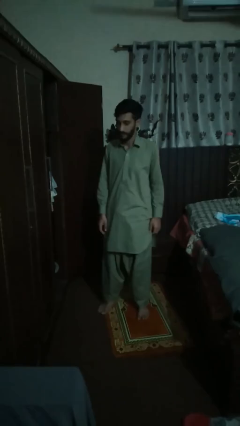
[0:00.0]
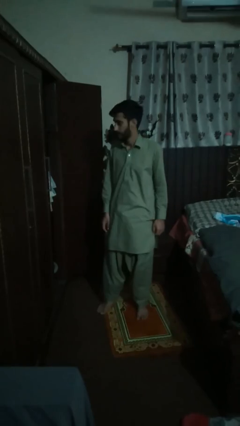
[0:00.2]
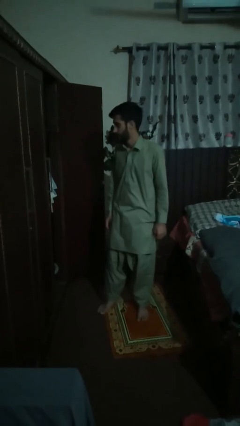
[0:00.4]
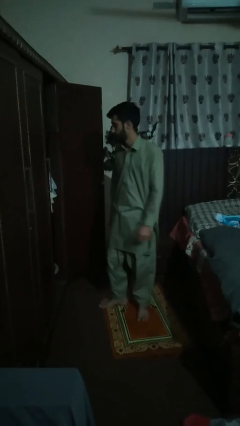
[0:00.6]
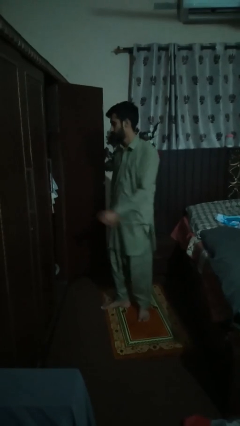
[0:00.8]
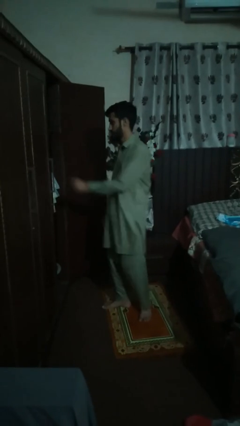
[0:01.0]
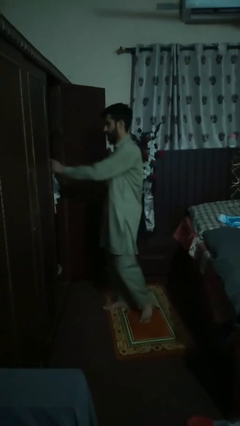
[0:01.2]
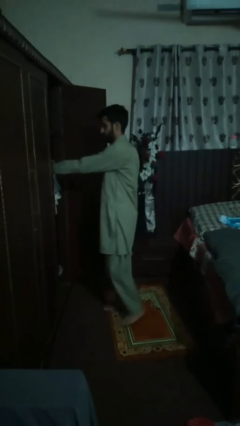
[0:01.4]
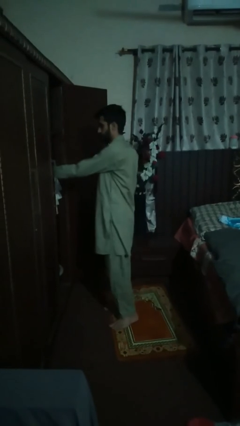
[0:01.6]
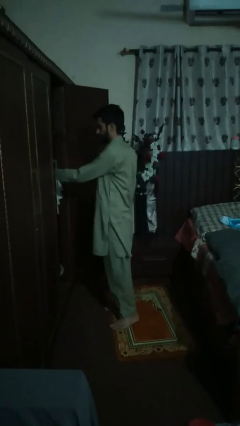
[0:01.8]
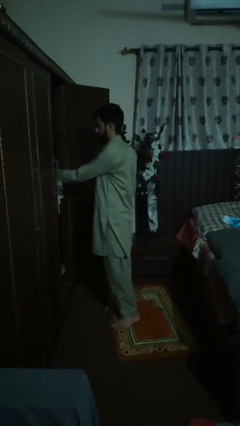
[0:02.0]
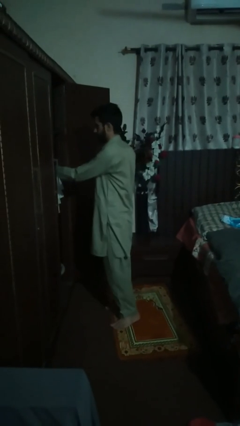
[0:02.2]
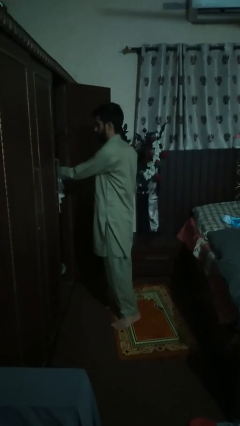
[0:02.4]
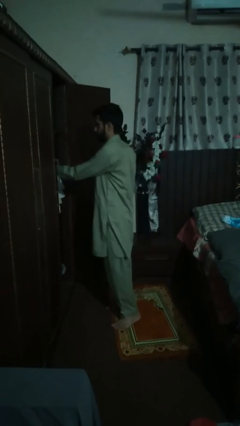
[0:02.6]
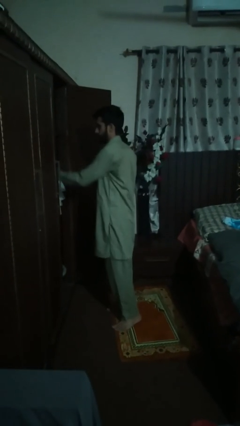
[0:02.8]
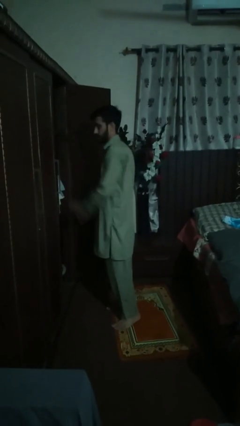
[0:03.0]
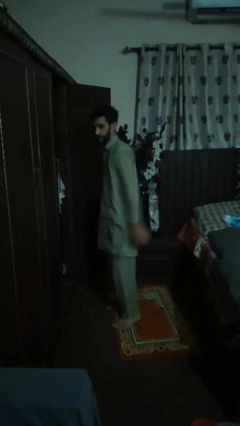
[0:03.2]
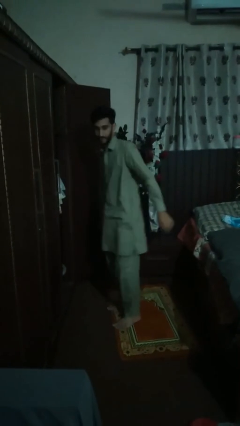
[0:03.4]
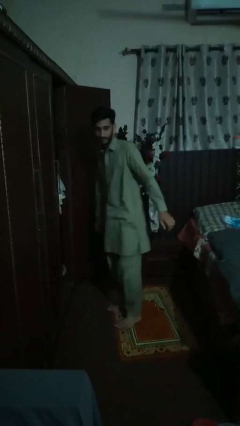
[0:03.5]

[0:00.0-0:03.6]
person searches in cabinet

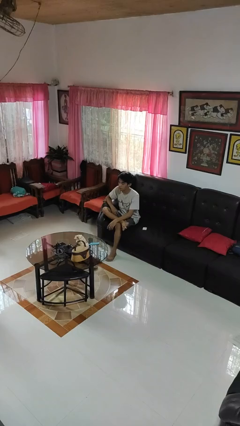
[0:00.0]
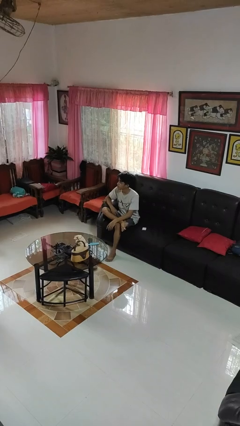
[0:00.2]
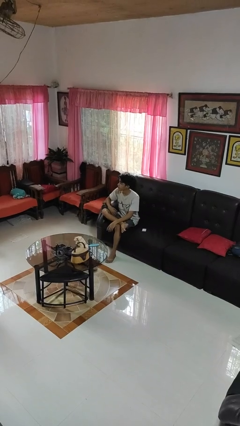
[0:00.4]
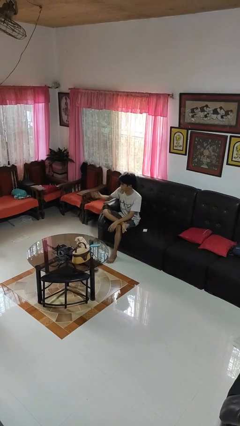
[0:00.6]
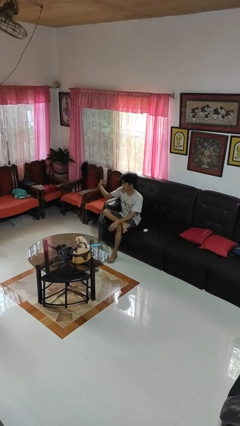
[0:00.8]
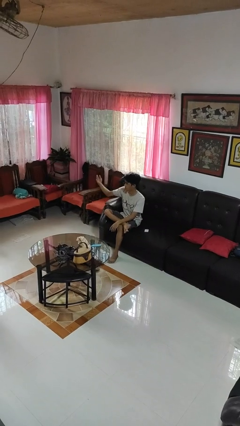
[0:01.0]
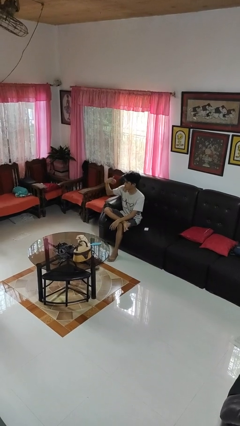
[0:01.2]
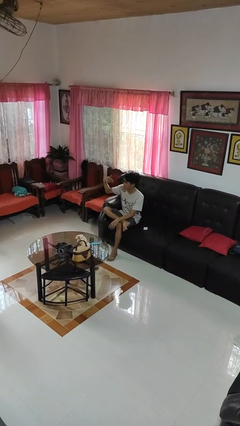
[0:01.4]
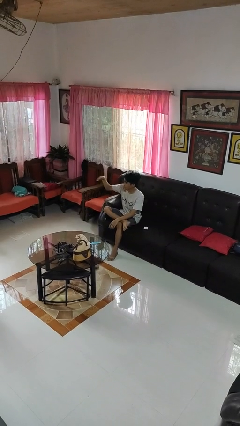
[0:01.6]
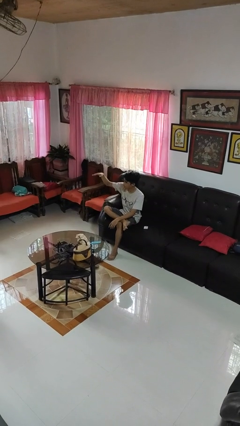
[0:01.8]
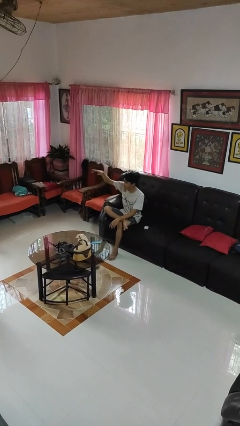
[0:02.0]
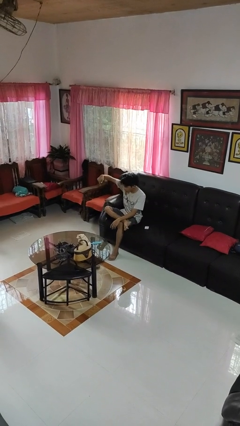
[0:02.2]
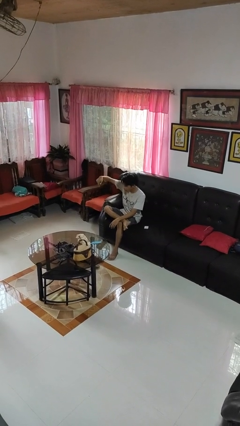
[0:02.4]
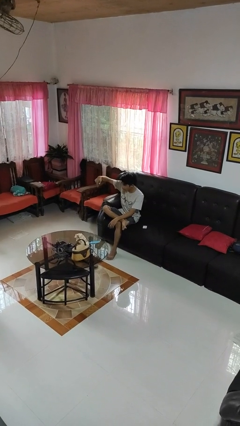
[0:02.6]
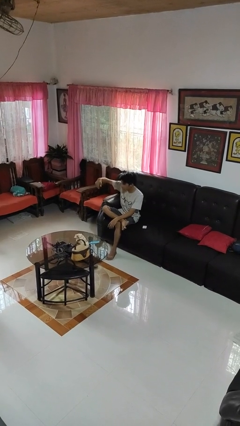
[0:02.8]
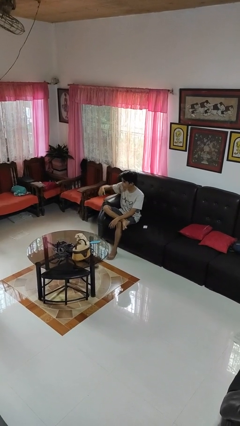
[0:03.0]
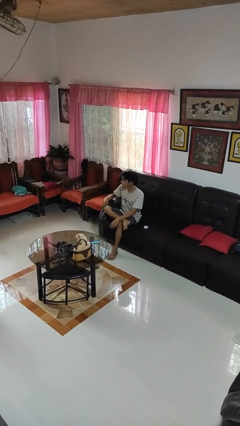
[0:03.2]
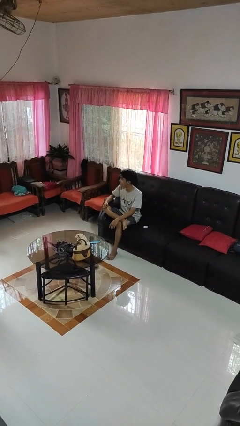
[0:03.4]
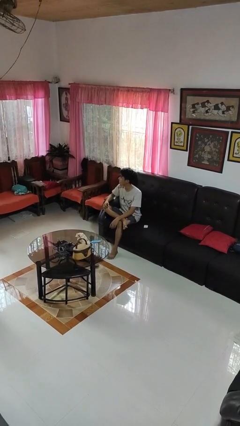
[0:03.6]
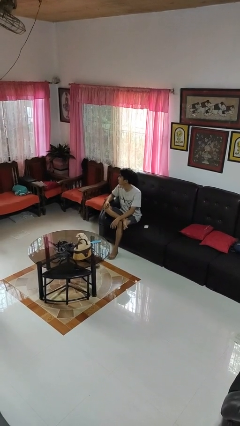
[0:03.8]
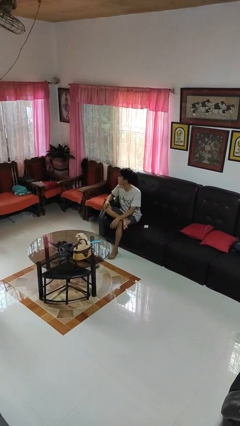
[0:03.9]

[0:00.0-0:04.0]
person gestures come here

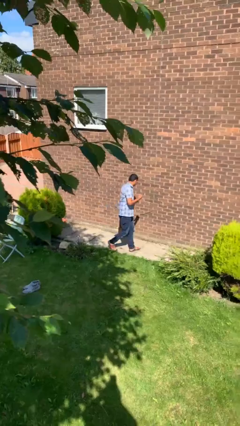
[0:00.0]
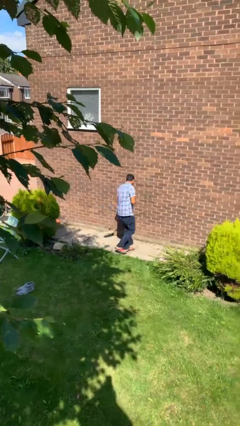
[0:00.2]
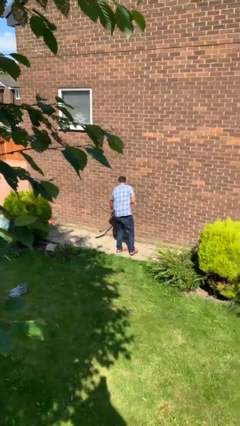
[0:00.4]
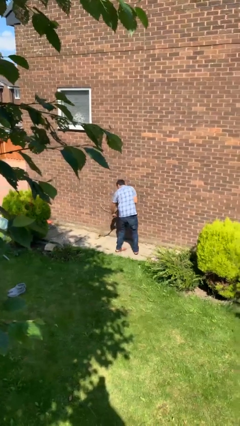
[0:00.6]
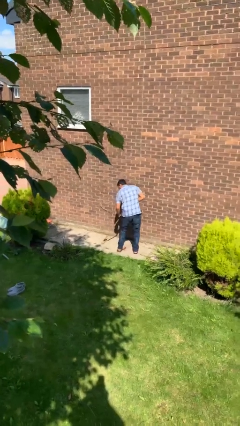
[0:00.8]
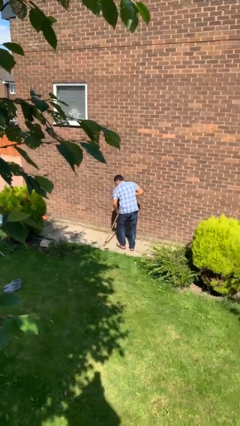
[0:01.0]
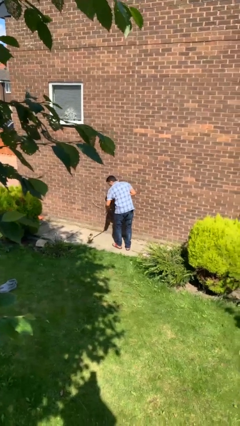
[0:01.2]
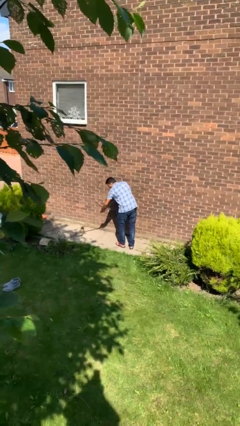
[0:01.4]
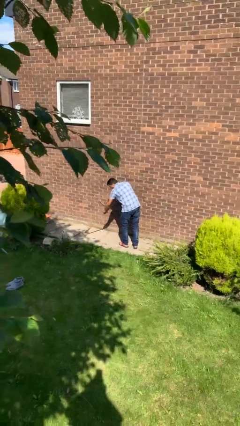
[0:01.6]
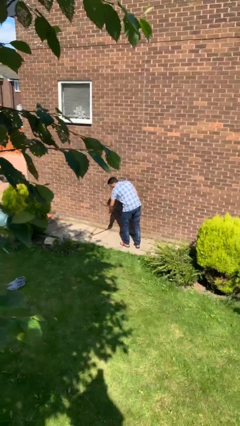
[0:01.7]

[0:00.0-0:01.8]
person sweeps floor

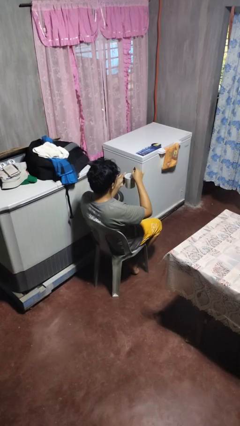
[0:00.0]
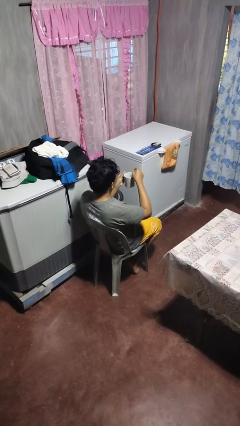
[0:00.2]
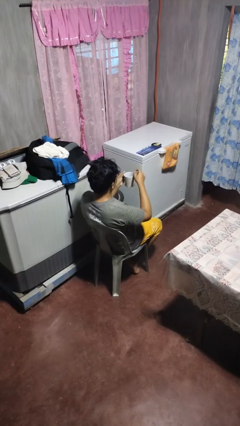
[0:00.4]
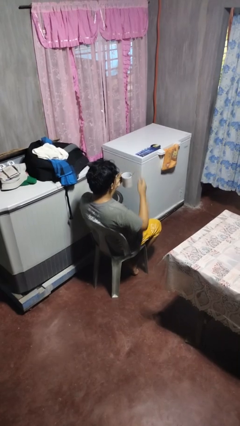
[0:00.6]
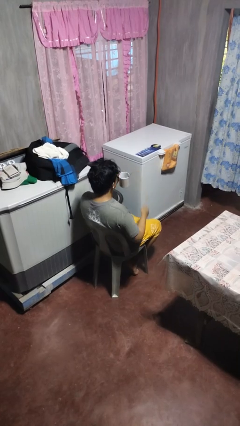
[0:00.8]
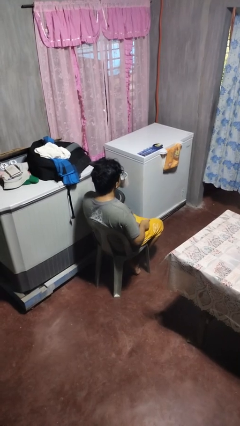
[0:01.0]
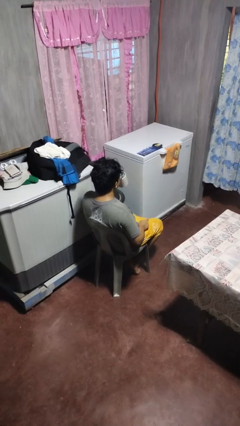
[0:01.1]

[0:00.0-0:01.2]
person drinks from mug

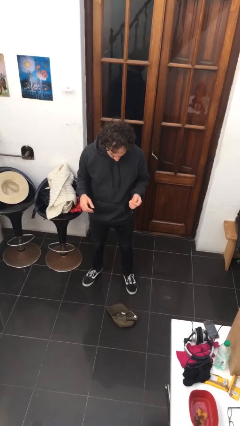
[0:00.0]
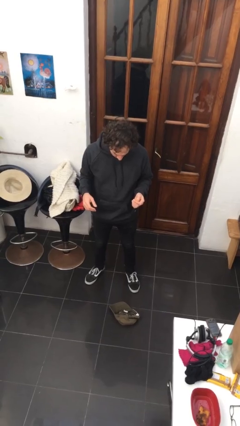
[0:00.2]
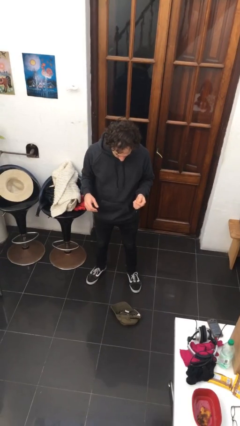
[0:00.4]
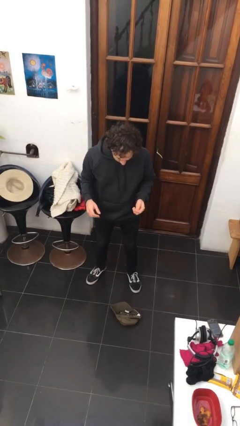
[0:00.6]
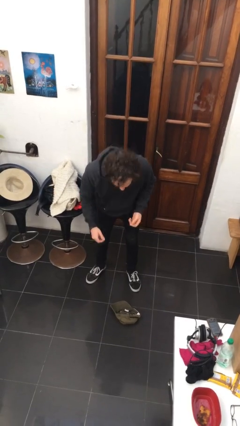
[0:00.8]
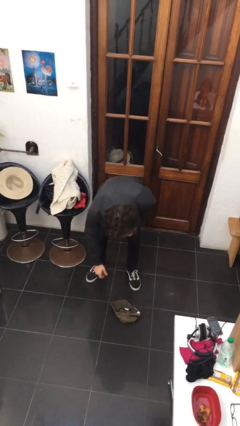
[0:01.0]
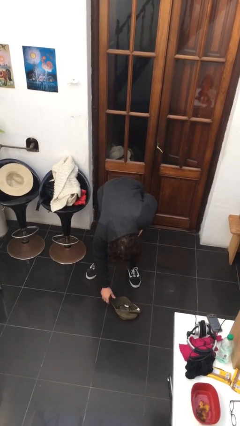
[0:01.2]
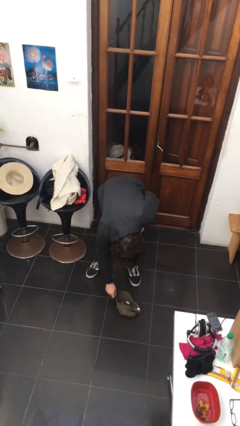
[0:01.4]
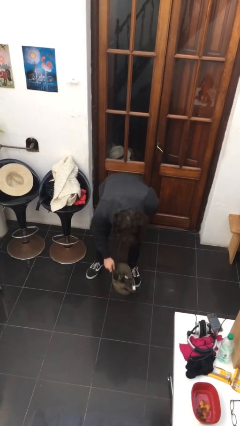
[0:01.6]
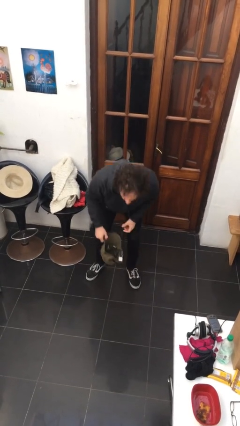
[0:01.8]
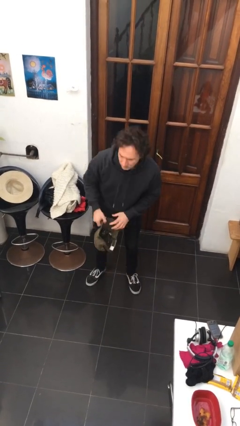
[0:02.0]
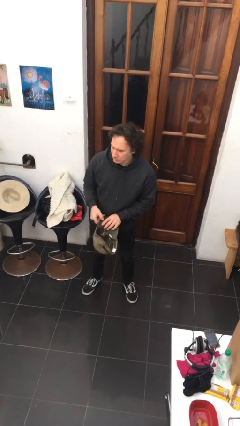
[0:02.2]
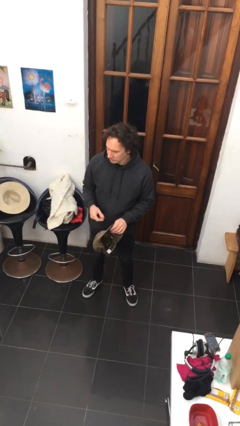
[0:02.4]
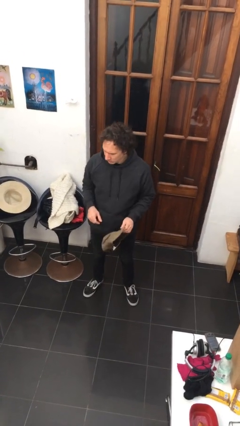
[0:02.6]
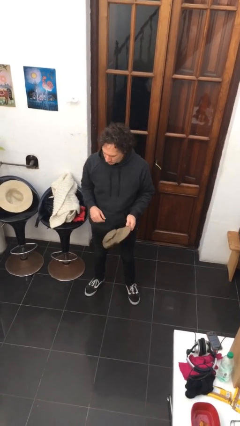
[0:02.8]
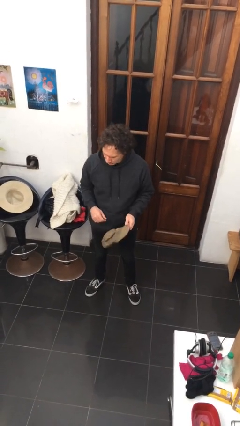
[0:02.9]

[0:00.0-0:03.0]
person picks up object from floor

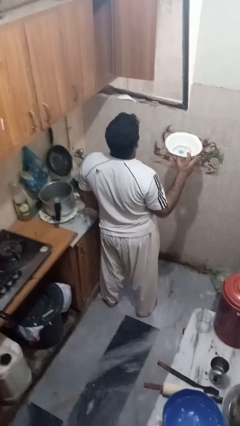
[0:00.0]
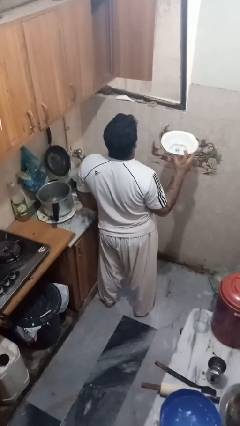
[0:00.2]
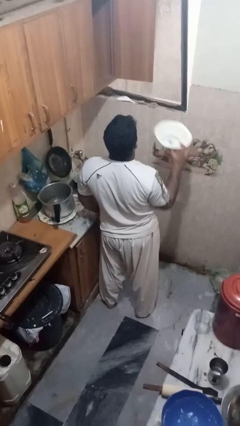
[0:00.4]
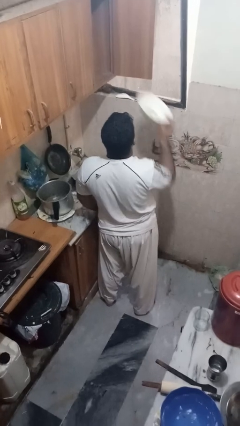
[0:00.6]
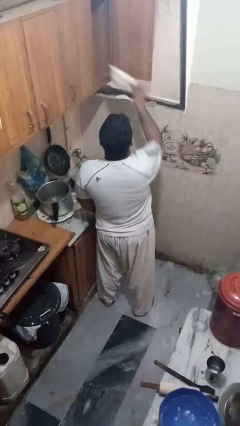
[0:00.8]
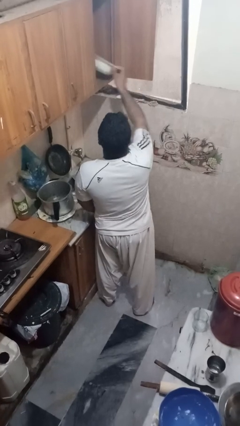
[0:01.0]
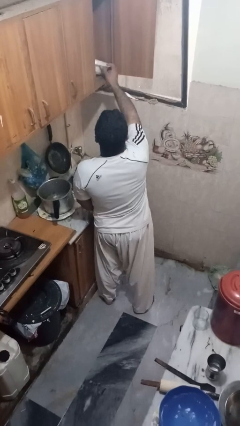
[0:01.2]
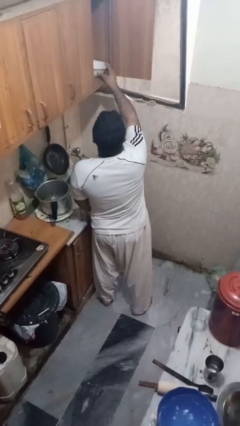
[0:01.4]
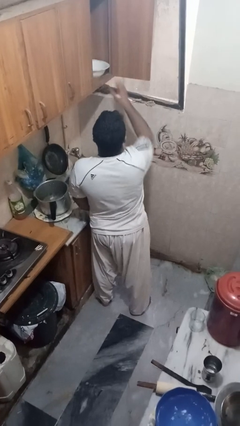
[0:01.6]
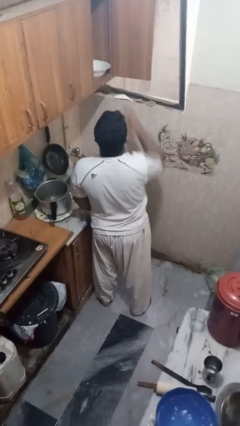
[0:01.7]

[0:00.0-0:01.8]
person puts object in cabinet

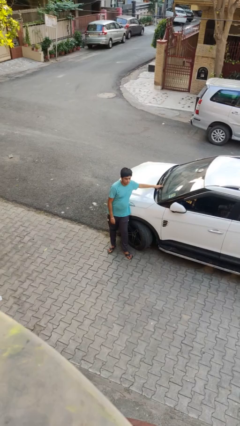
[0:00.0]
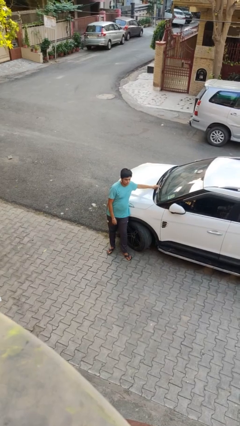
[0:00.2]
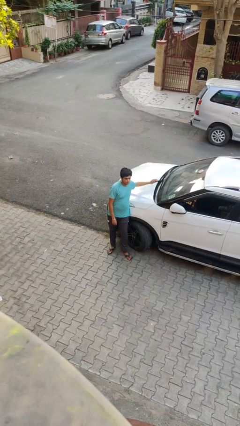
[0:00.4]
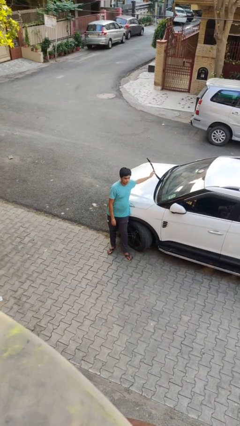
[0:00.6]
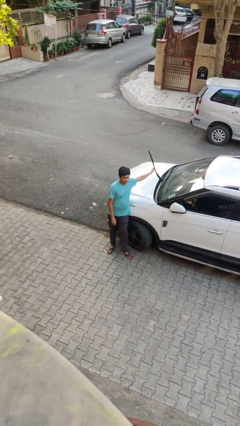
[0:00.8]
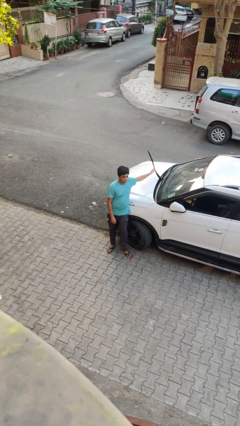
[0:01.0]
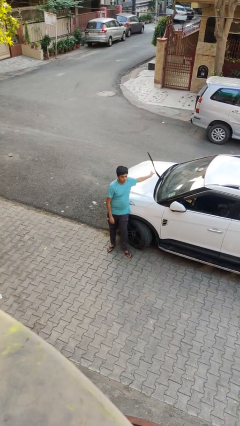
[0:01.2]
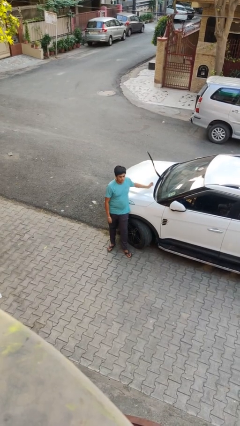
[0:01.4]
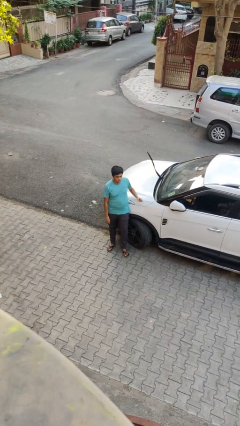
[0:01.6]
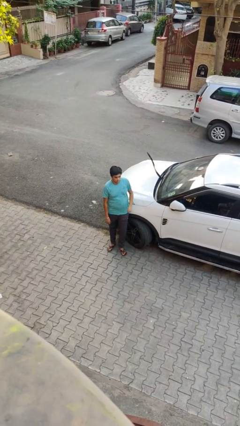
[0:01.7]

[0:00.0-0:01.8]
person flips up car wipers
